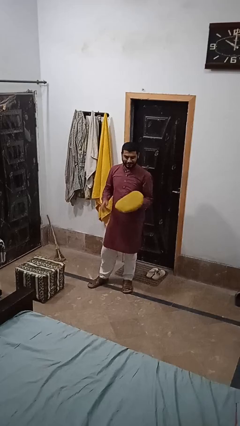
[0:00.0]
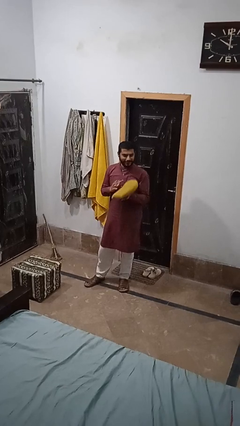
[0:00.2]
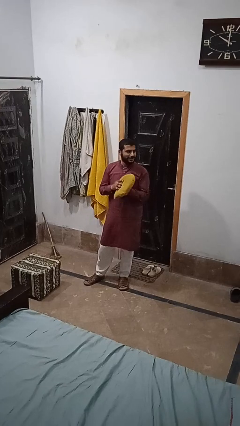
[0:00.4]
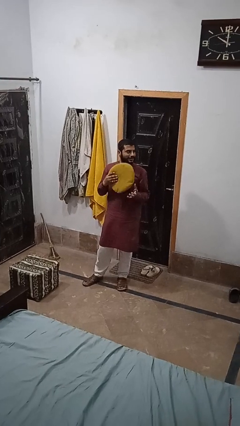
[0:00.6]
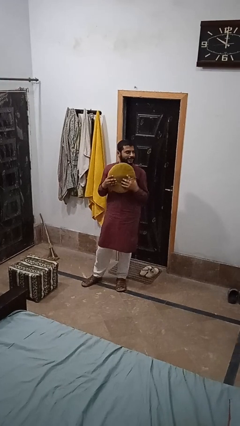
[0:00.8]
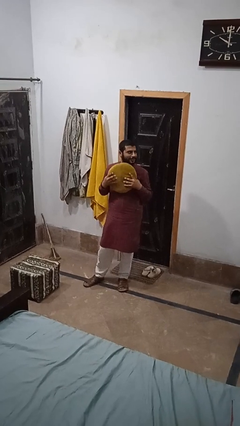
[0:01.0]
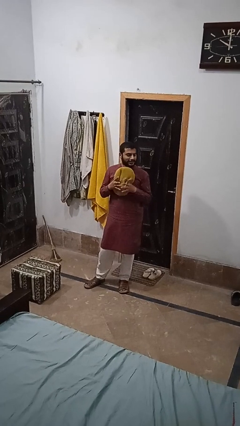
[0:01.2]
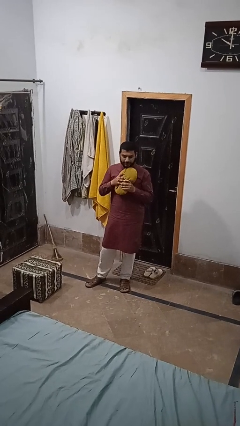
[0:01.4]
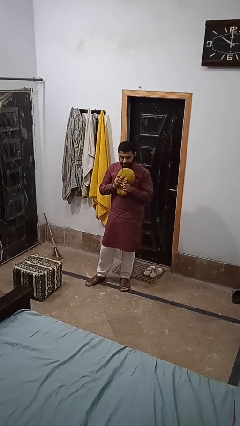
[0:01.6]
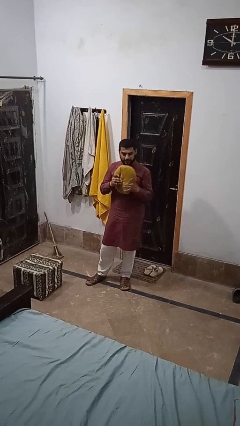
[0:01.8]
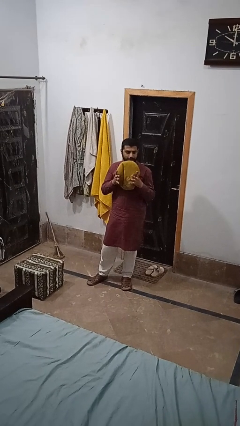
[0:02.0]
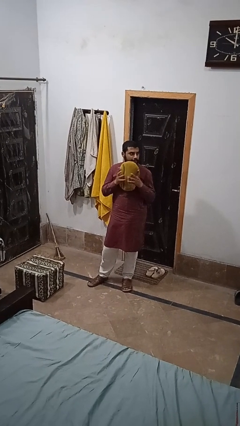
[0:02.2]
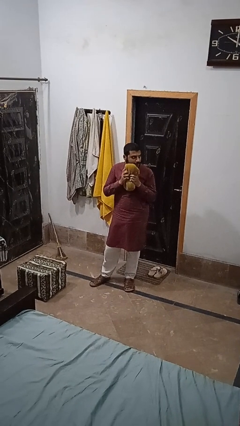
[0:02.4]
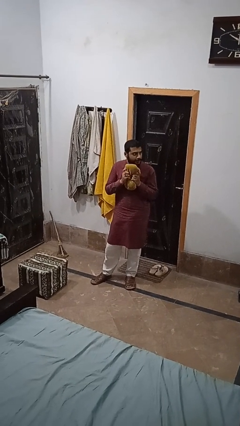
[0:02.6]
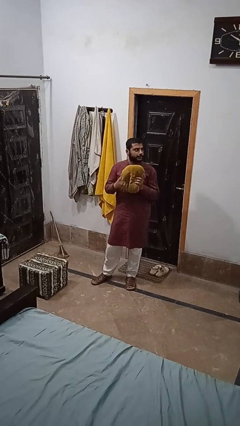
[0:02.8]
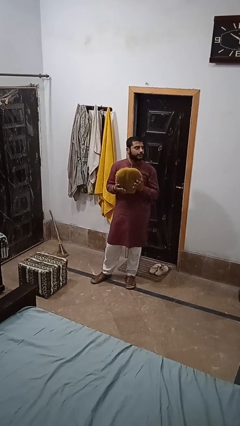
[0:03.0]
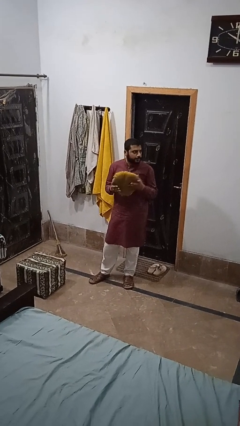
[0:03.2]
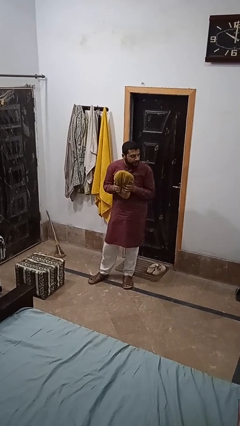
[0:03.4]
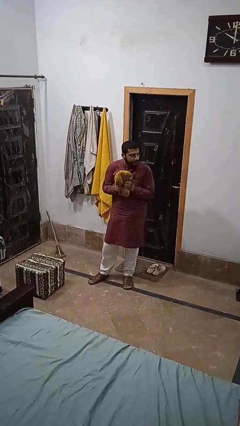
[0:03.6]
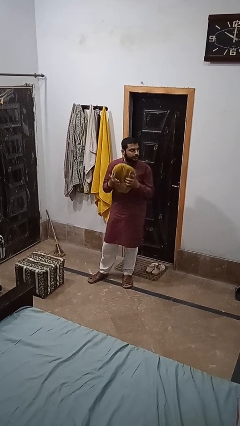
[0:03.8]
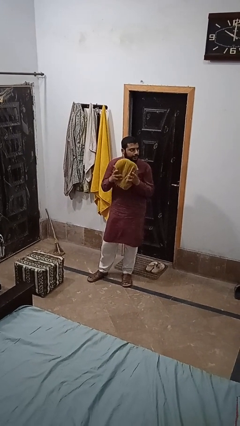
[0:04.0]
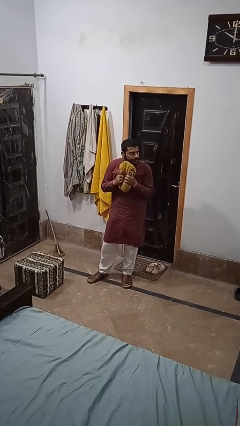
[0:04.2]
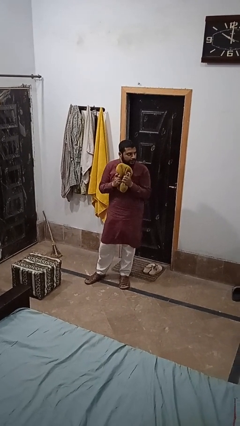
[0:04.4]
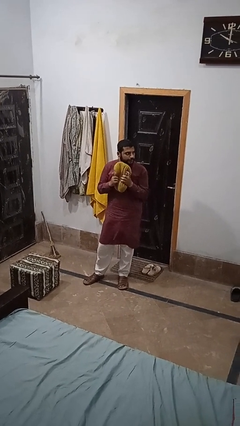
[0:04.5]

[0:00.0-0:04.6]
person squeezes object

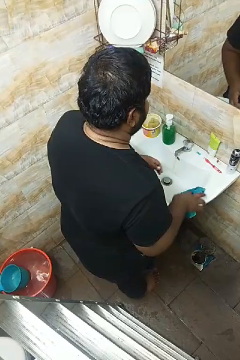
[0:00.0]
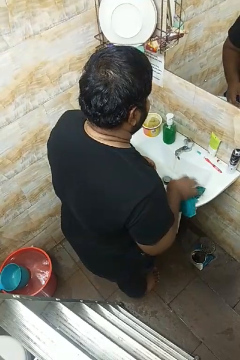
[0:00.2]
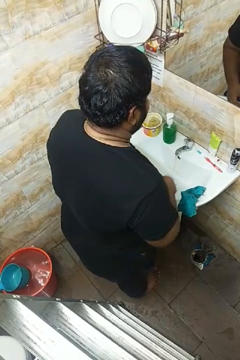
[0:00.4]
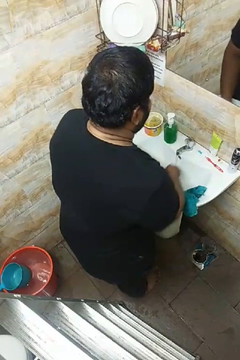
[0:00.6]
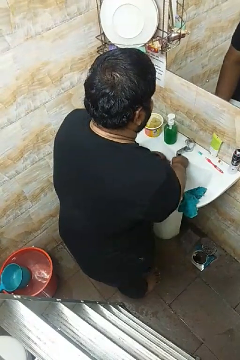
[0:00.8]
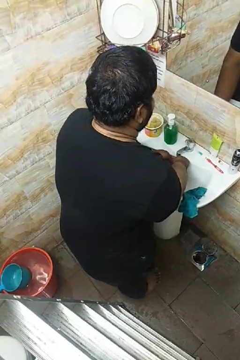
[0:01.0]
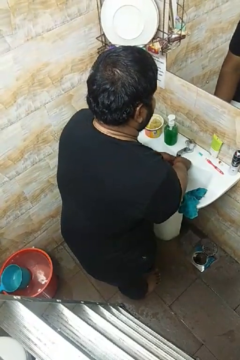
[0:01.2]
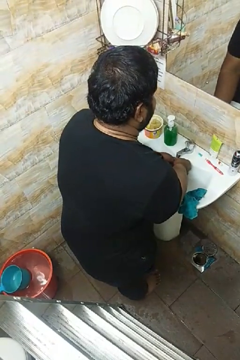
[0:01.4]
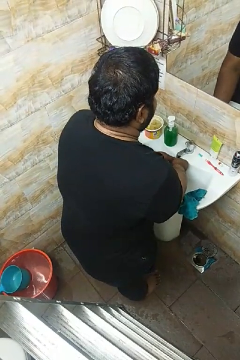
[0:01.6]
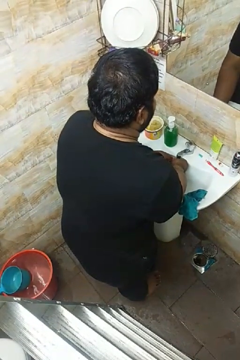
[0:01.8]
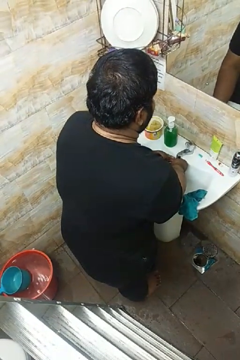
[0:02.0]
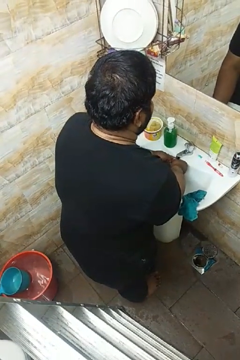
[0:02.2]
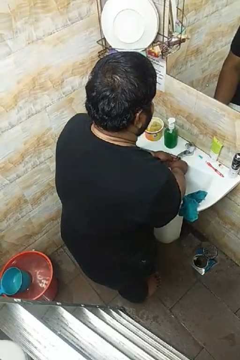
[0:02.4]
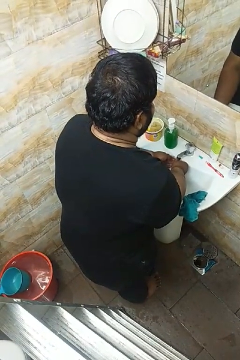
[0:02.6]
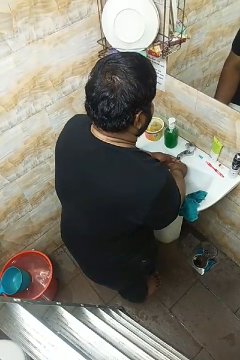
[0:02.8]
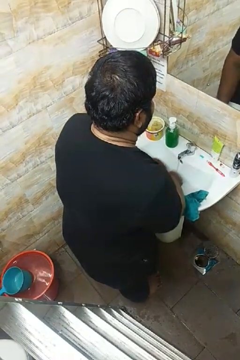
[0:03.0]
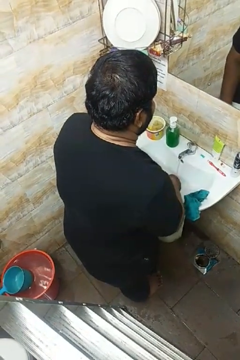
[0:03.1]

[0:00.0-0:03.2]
person washes hands

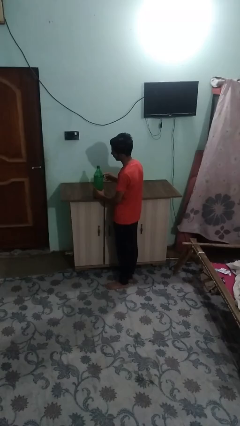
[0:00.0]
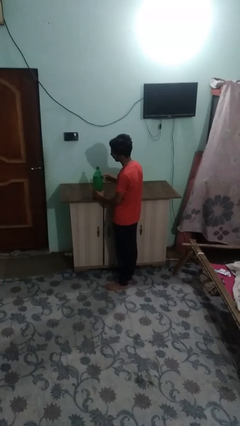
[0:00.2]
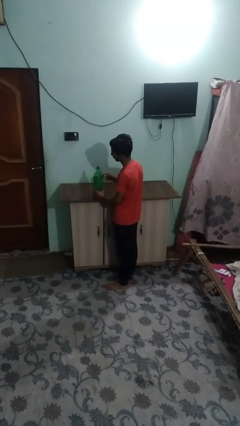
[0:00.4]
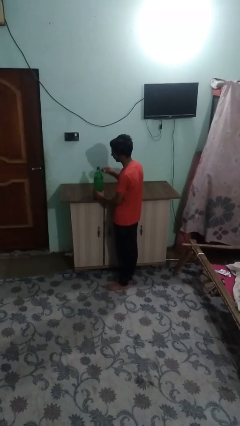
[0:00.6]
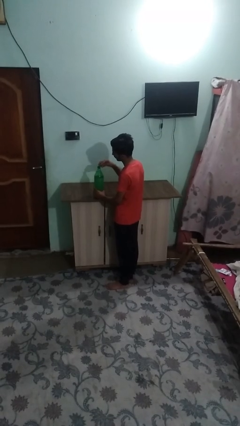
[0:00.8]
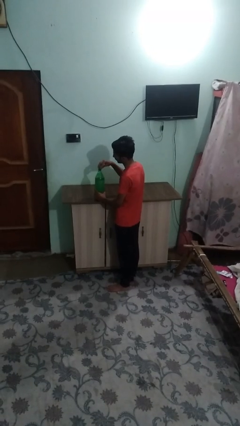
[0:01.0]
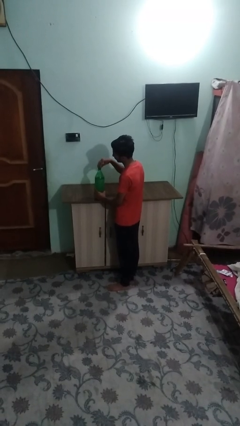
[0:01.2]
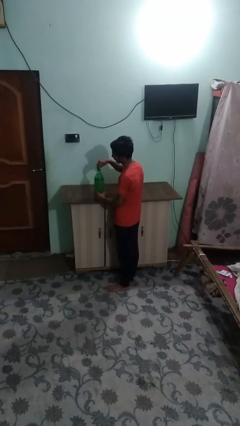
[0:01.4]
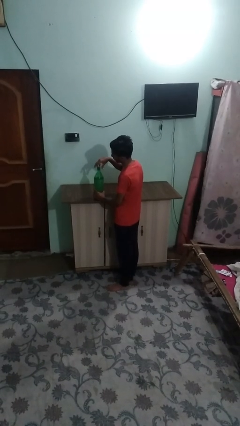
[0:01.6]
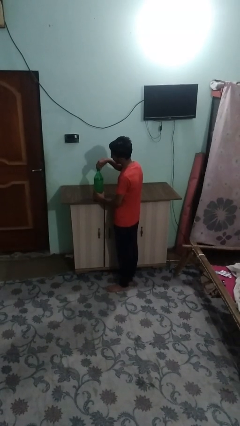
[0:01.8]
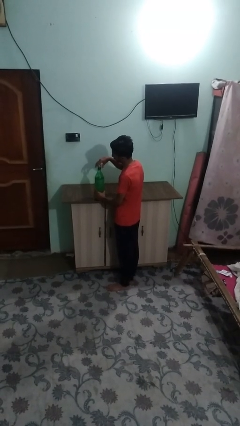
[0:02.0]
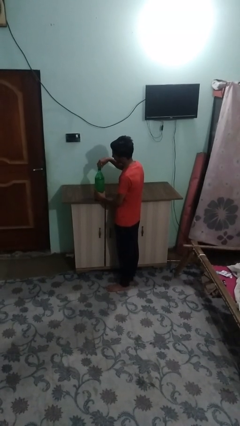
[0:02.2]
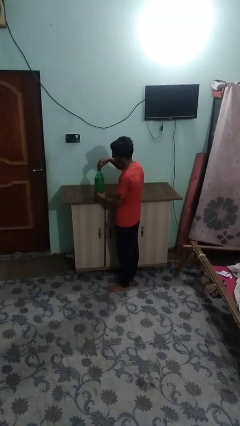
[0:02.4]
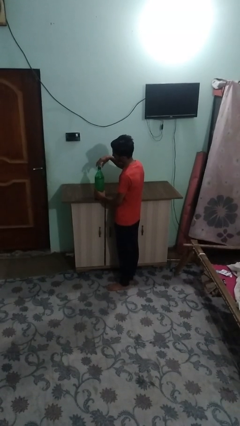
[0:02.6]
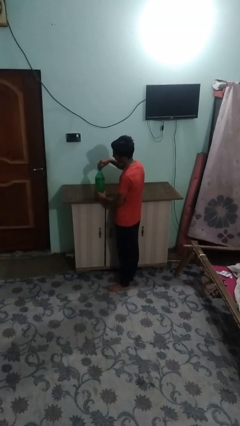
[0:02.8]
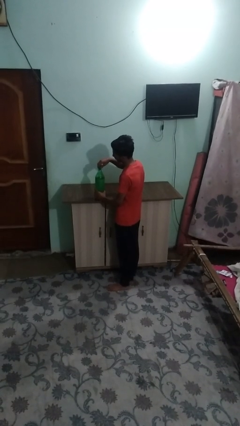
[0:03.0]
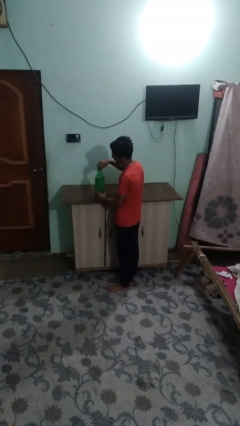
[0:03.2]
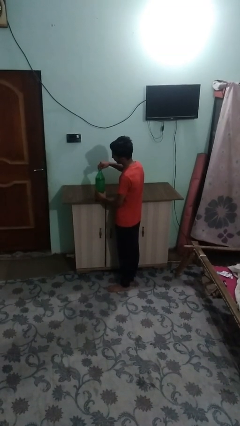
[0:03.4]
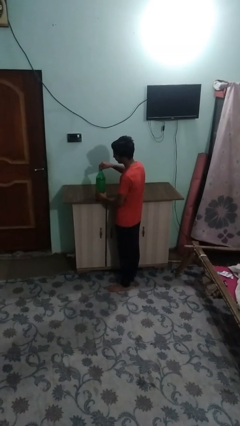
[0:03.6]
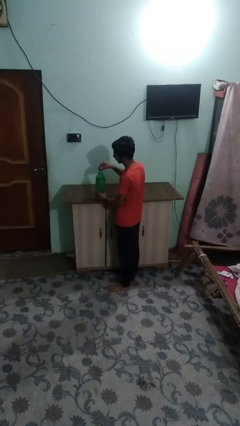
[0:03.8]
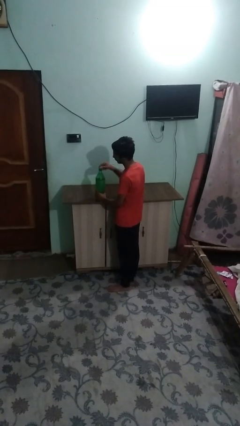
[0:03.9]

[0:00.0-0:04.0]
person screws lid to bottle

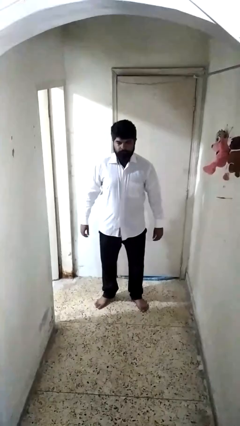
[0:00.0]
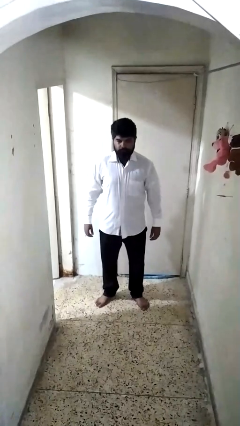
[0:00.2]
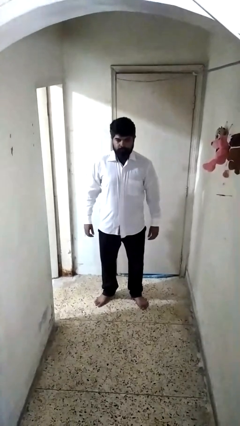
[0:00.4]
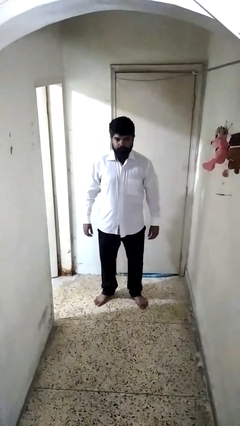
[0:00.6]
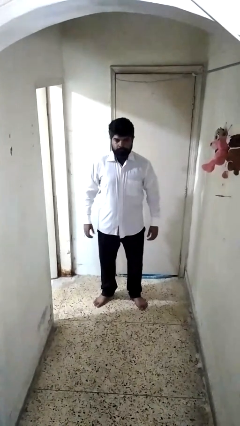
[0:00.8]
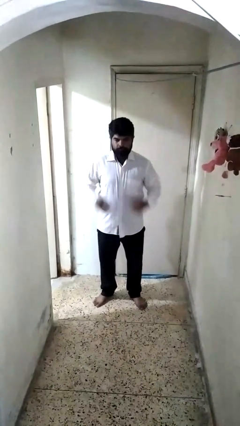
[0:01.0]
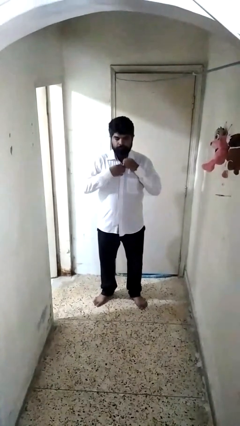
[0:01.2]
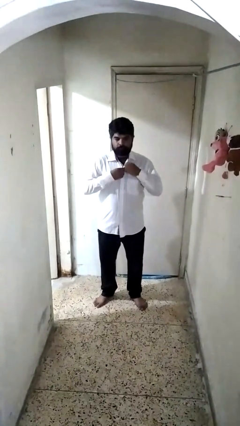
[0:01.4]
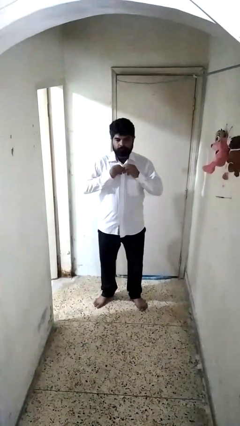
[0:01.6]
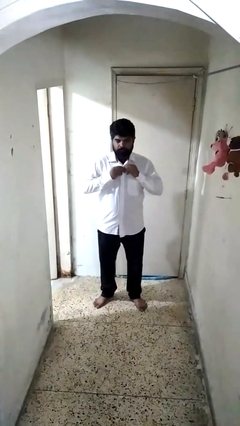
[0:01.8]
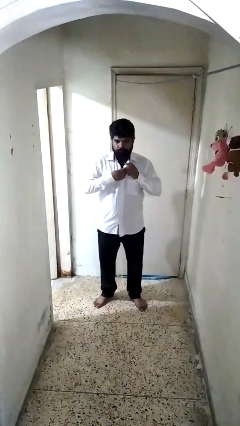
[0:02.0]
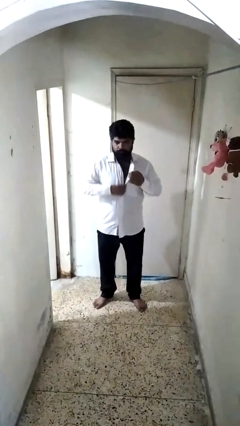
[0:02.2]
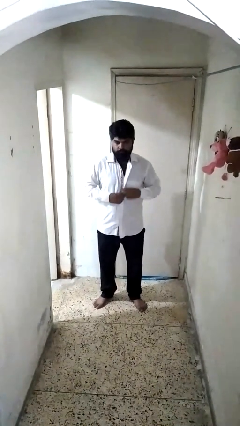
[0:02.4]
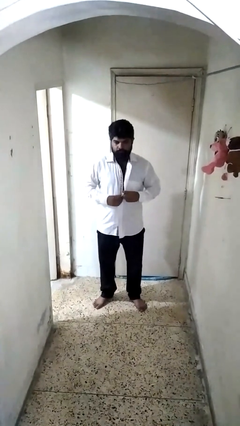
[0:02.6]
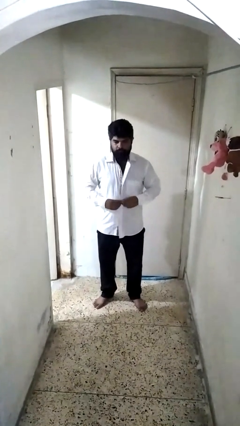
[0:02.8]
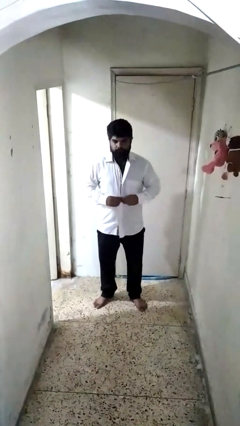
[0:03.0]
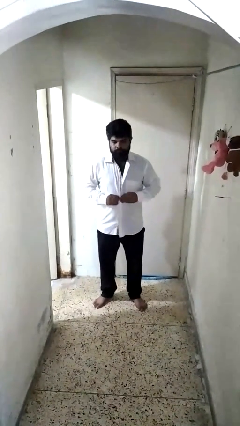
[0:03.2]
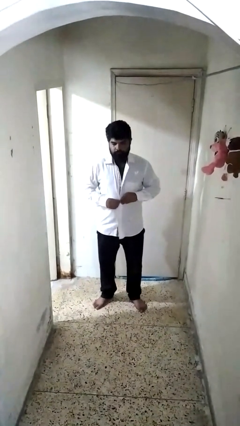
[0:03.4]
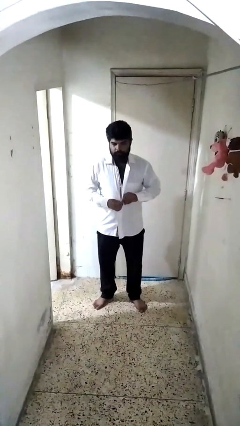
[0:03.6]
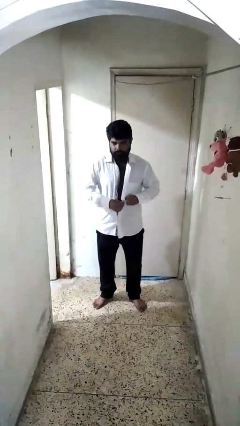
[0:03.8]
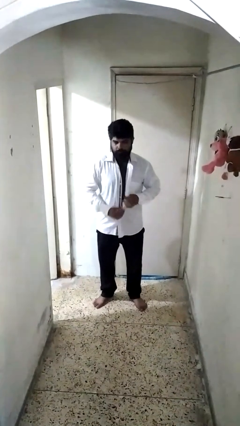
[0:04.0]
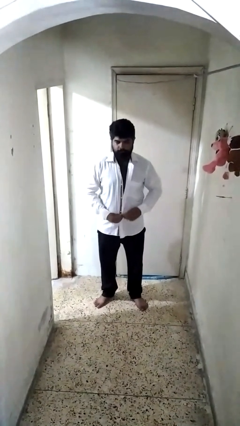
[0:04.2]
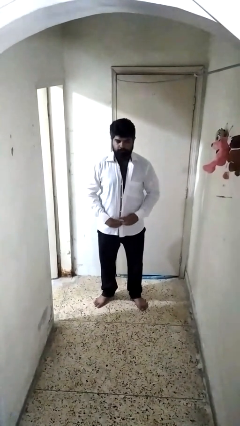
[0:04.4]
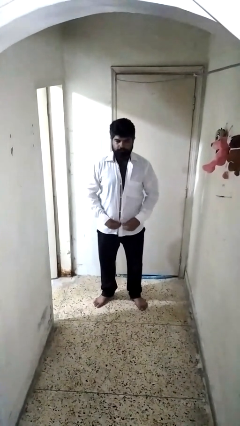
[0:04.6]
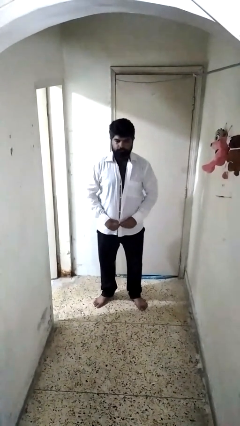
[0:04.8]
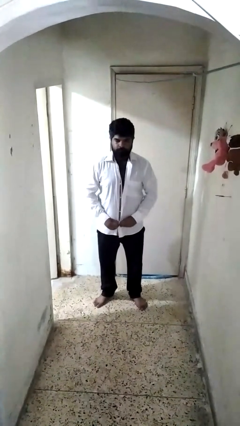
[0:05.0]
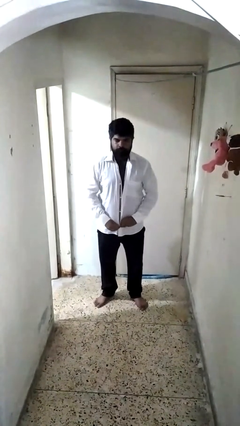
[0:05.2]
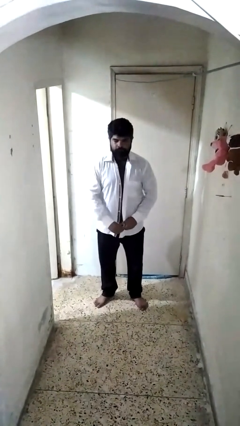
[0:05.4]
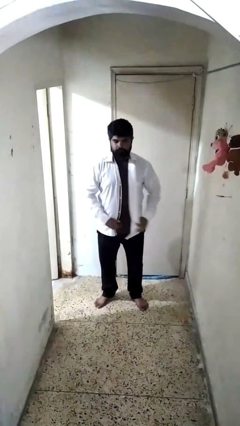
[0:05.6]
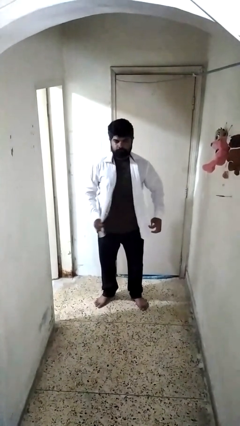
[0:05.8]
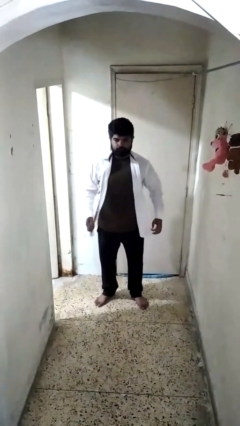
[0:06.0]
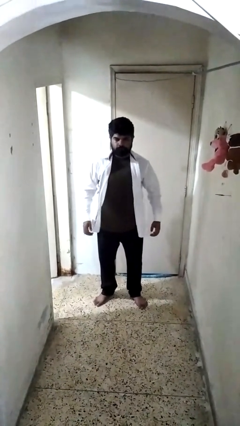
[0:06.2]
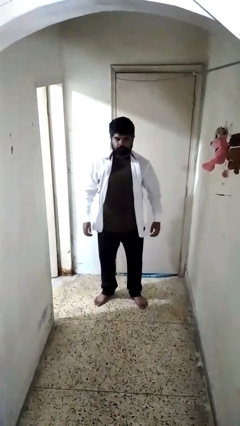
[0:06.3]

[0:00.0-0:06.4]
person unbuttons shirt
